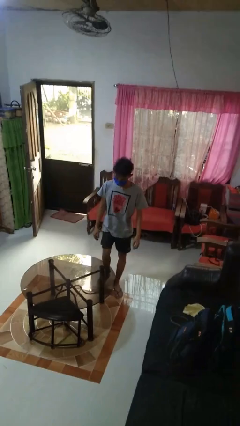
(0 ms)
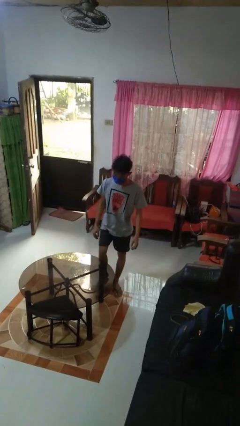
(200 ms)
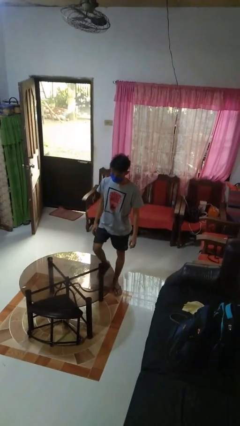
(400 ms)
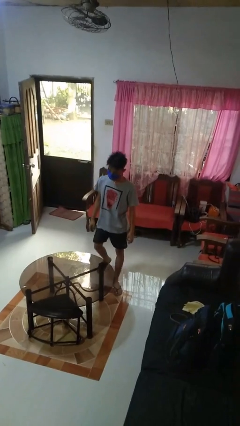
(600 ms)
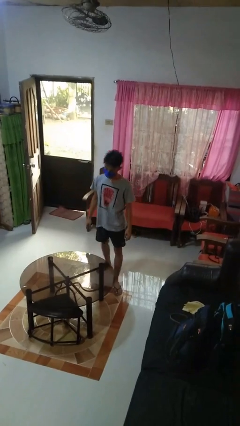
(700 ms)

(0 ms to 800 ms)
person bumps into table

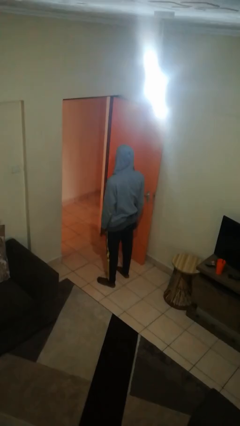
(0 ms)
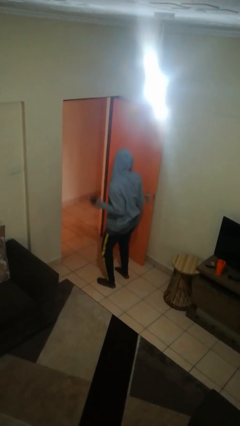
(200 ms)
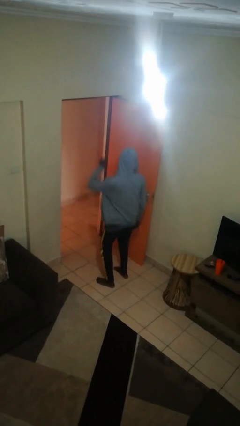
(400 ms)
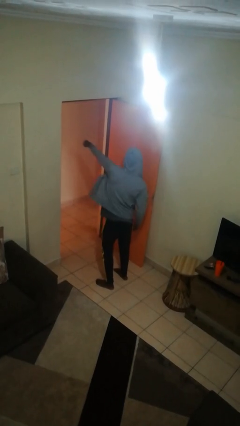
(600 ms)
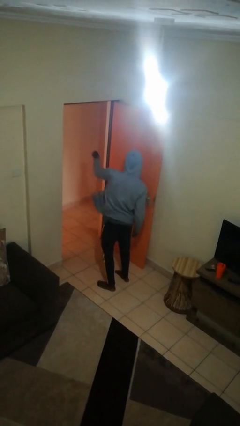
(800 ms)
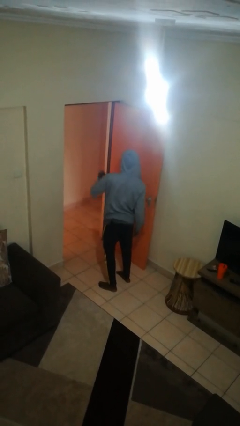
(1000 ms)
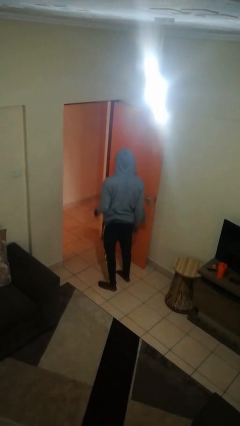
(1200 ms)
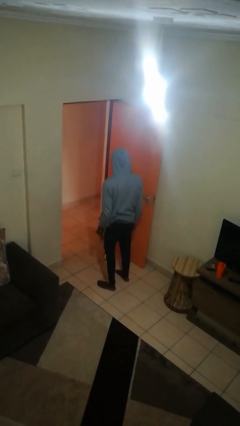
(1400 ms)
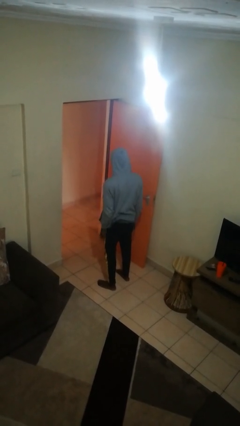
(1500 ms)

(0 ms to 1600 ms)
person punches

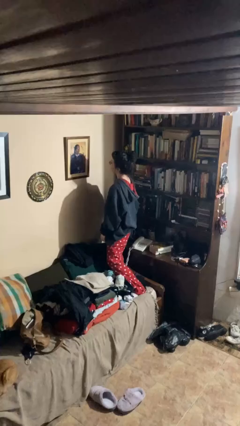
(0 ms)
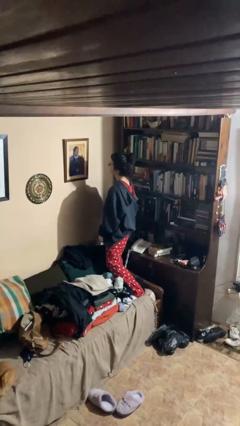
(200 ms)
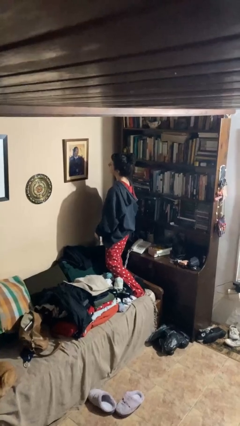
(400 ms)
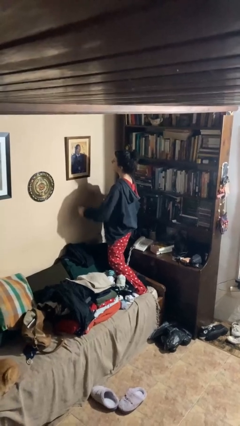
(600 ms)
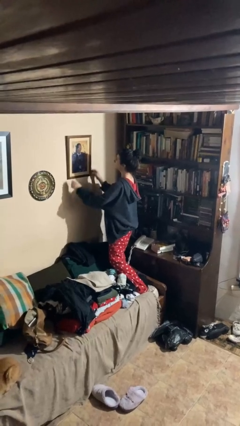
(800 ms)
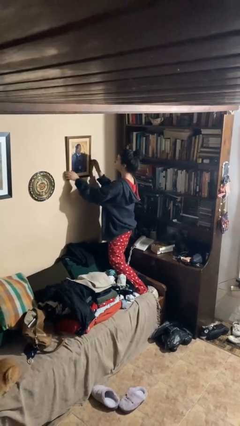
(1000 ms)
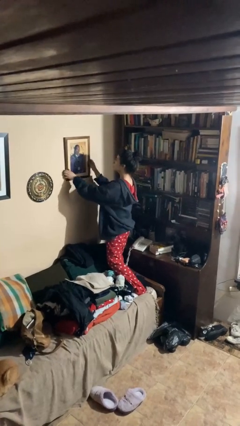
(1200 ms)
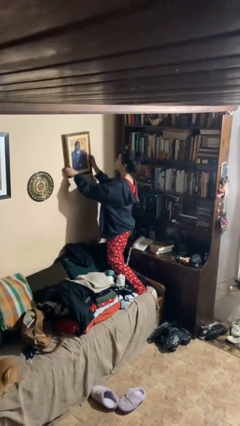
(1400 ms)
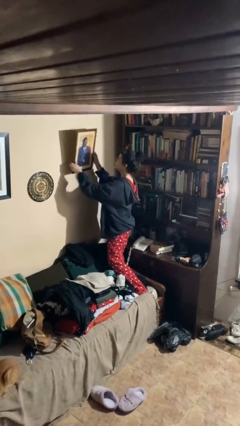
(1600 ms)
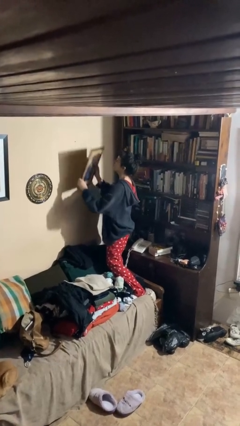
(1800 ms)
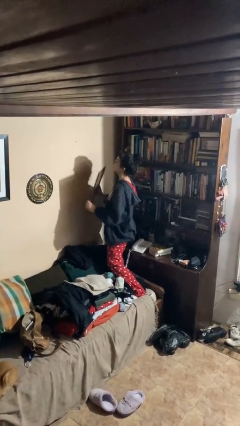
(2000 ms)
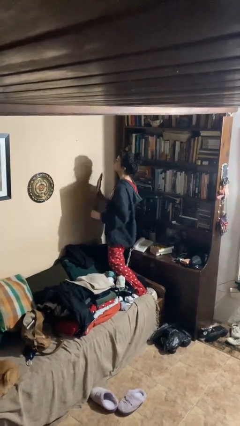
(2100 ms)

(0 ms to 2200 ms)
person takes down picture frame

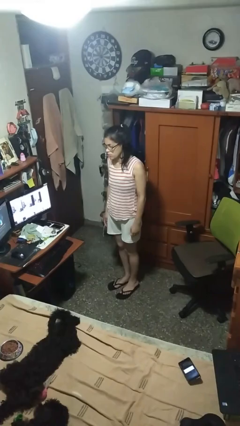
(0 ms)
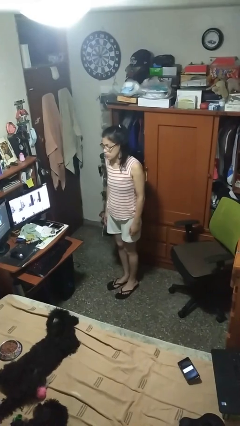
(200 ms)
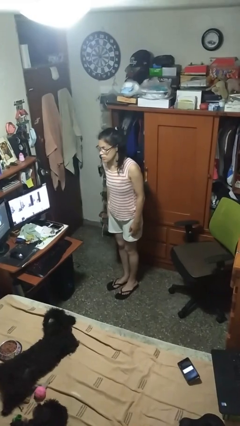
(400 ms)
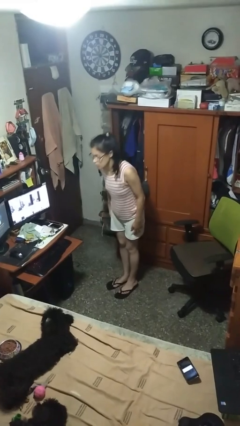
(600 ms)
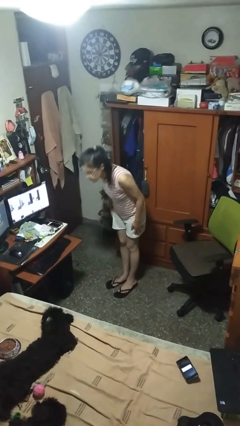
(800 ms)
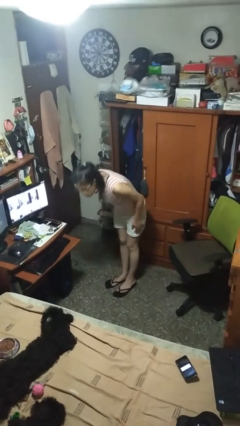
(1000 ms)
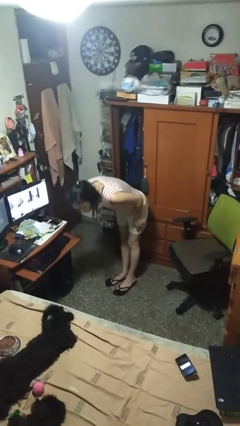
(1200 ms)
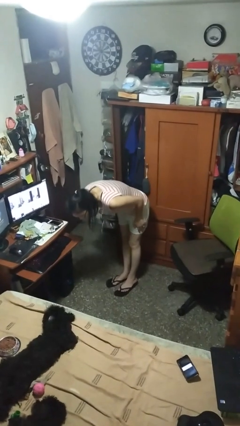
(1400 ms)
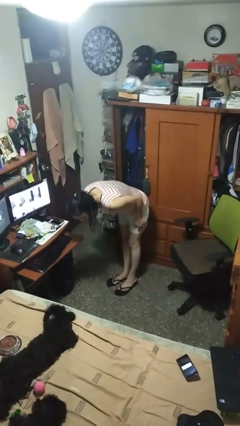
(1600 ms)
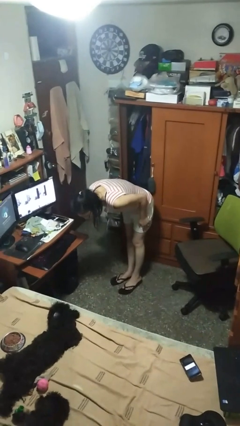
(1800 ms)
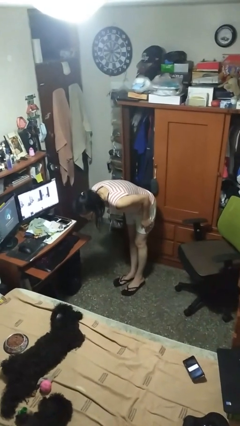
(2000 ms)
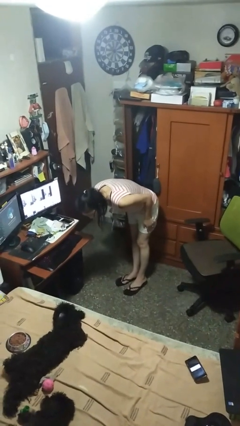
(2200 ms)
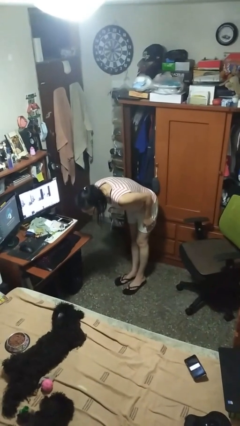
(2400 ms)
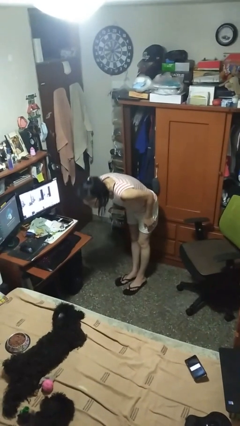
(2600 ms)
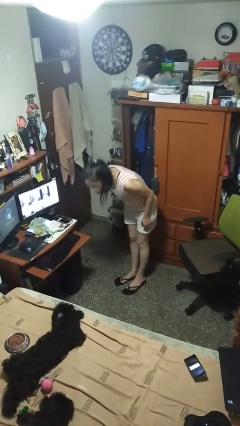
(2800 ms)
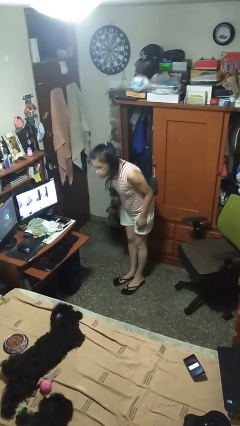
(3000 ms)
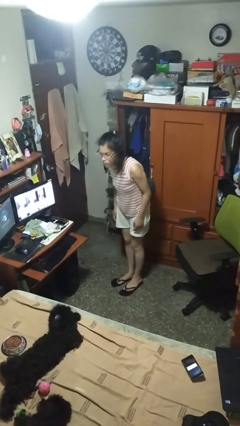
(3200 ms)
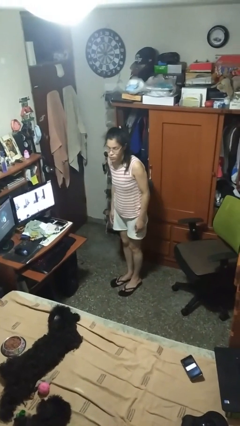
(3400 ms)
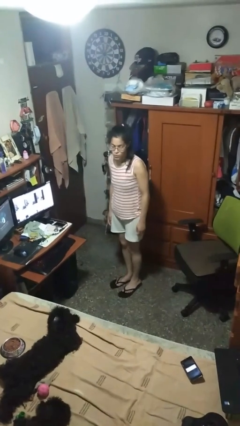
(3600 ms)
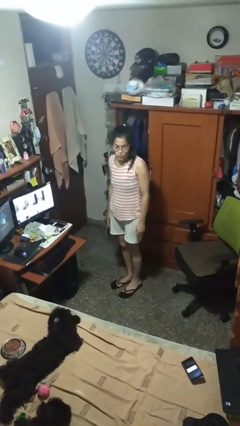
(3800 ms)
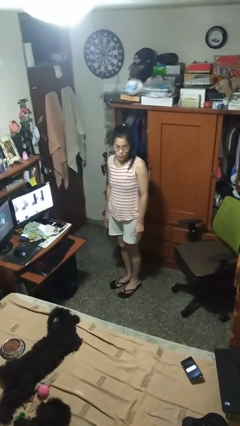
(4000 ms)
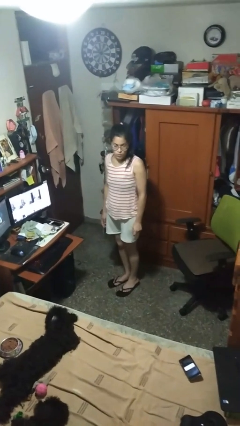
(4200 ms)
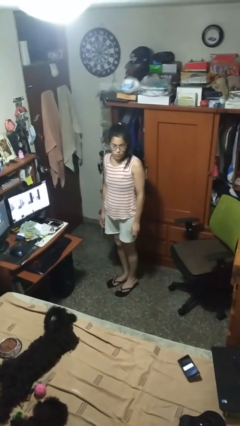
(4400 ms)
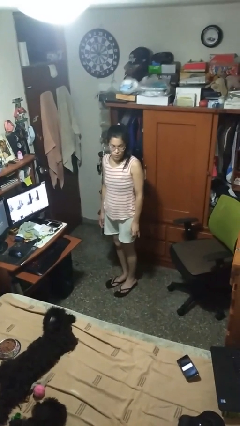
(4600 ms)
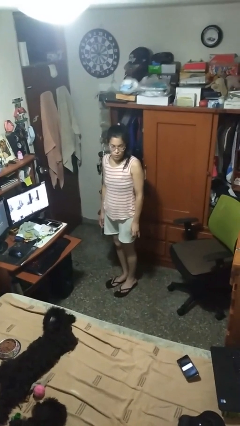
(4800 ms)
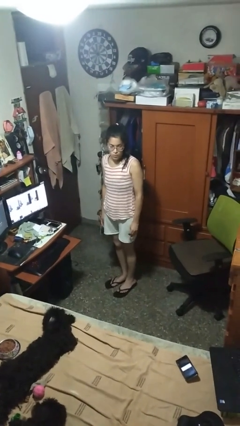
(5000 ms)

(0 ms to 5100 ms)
person bows

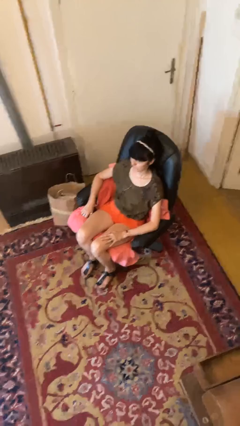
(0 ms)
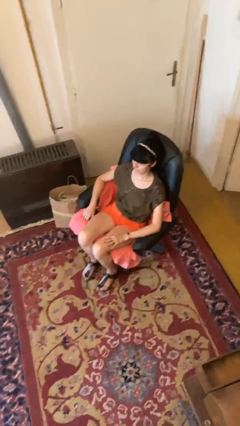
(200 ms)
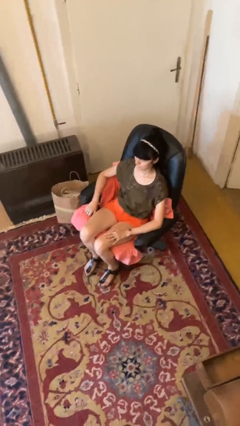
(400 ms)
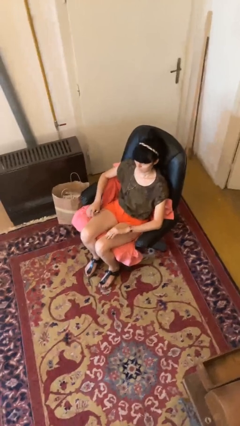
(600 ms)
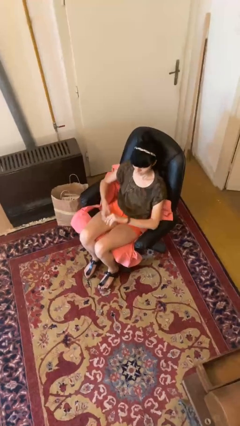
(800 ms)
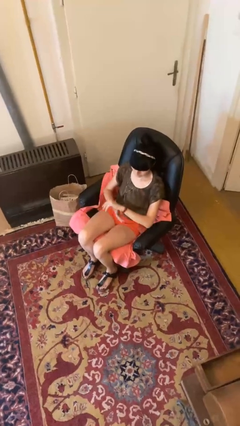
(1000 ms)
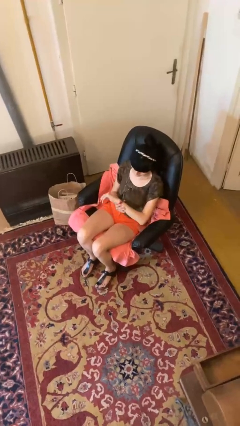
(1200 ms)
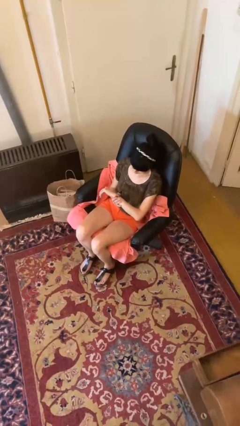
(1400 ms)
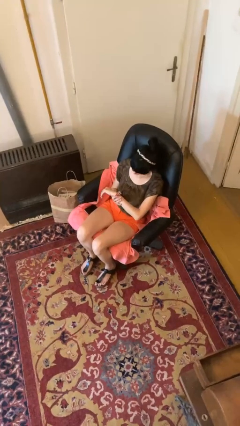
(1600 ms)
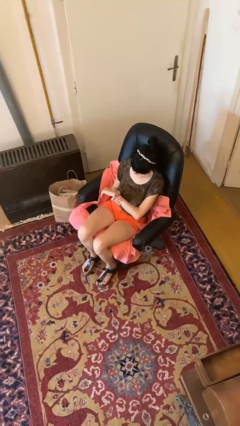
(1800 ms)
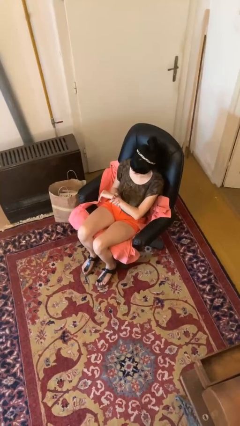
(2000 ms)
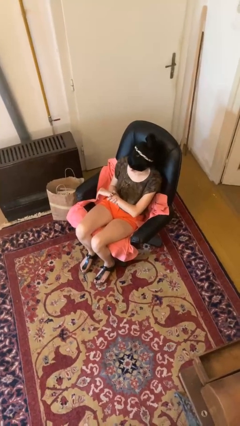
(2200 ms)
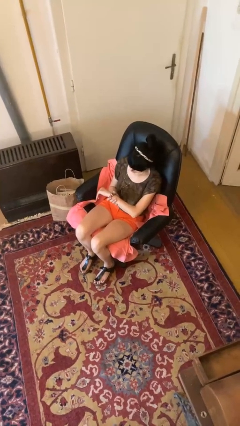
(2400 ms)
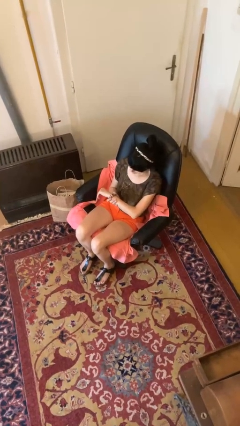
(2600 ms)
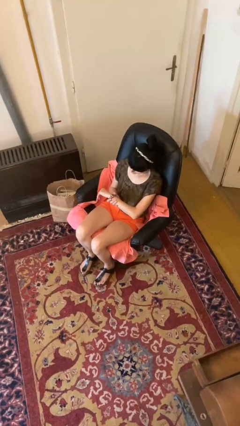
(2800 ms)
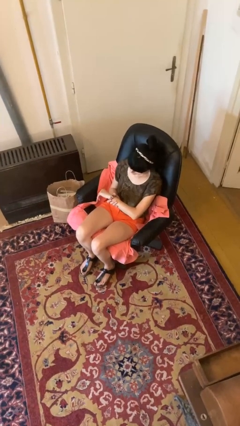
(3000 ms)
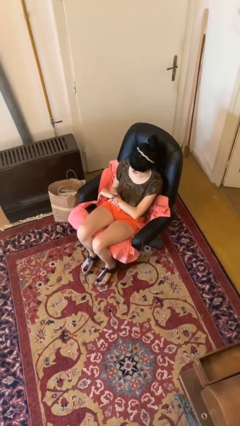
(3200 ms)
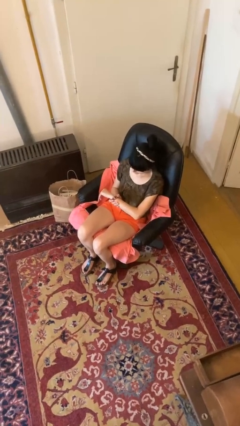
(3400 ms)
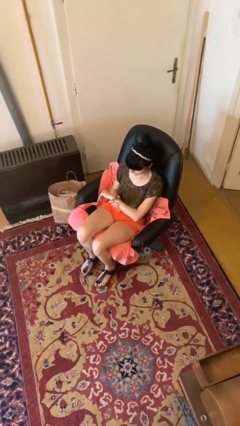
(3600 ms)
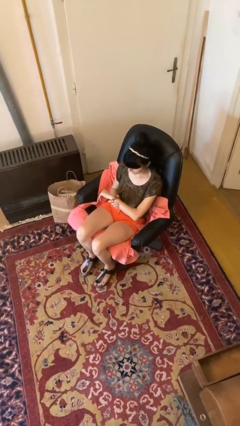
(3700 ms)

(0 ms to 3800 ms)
person looks at wristwatch

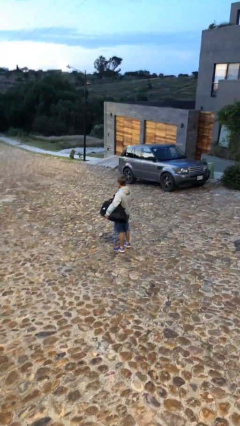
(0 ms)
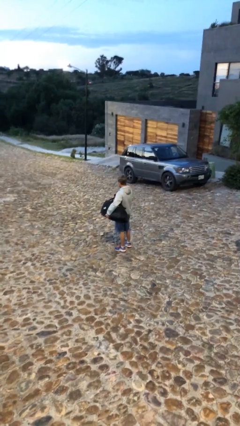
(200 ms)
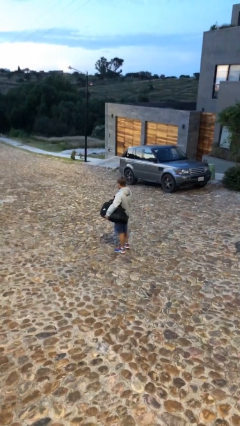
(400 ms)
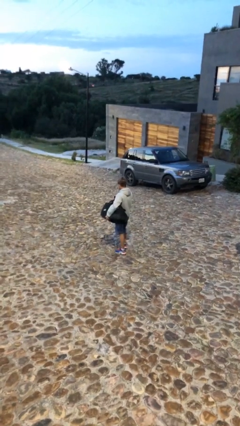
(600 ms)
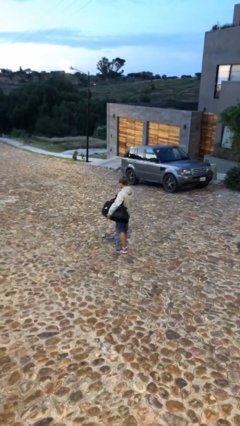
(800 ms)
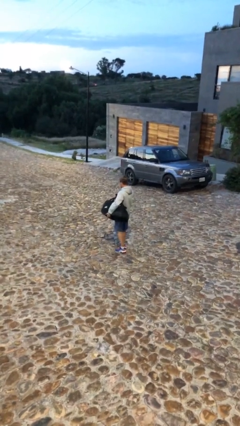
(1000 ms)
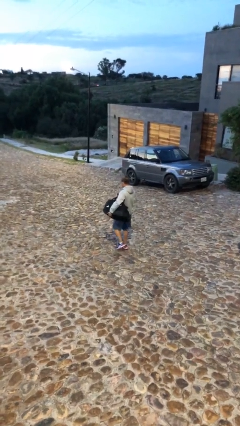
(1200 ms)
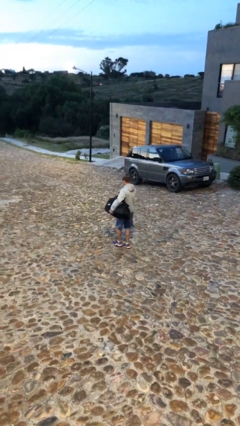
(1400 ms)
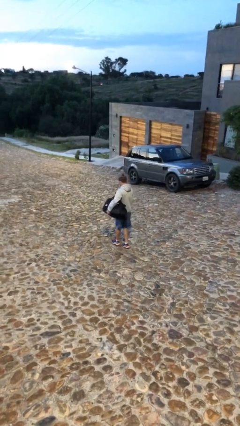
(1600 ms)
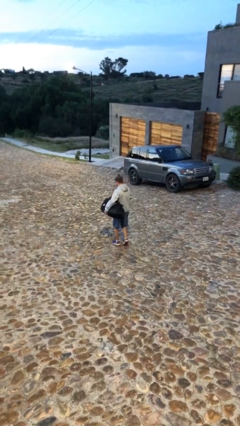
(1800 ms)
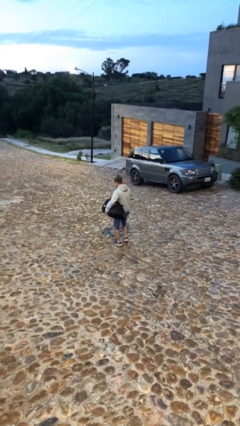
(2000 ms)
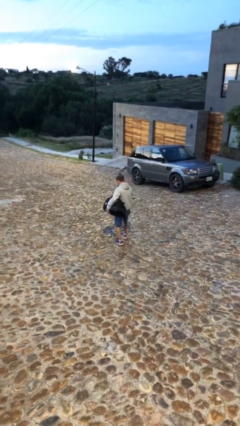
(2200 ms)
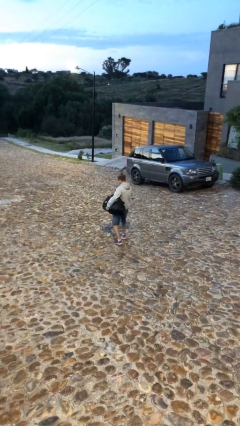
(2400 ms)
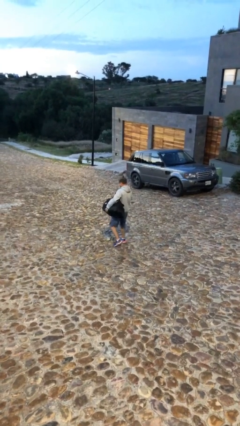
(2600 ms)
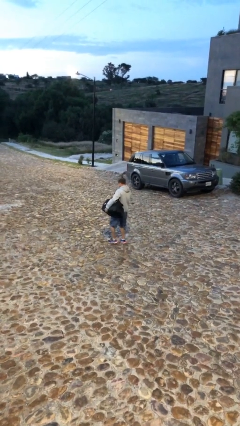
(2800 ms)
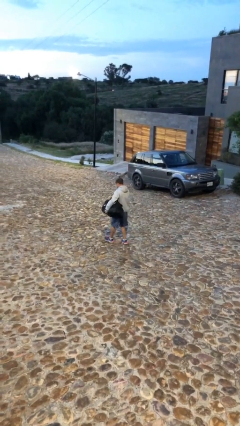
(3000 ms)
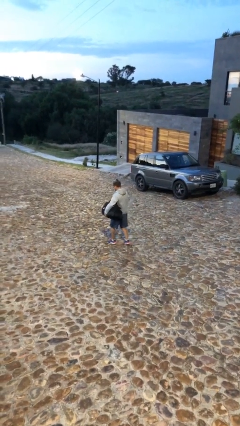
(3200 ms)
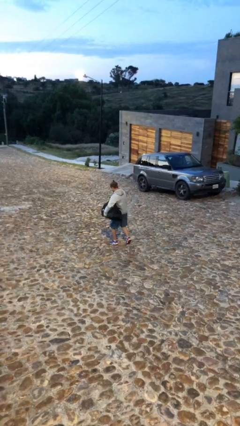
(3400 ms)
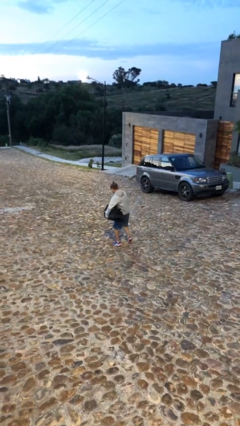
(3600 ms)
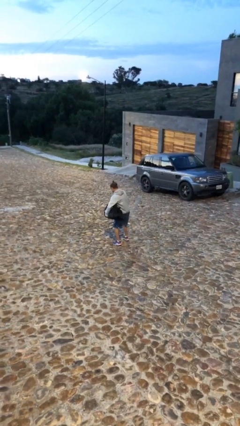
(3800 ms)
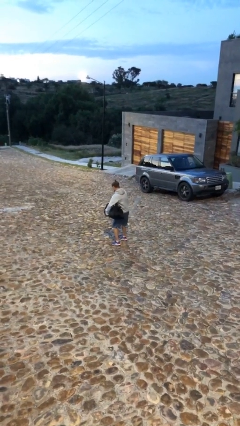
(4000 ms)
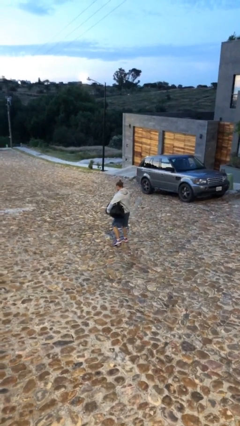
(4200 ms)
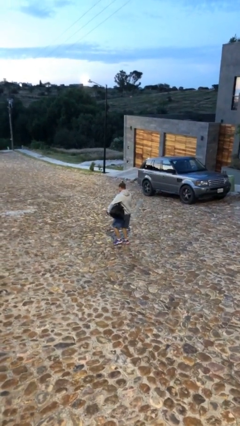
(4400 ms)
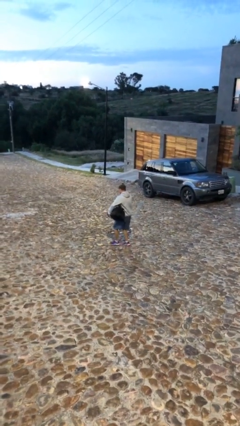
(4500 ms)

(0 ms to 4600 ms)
person carries heavy object
